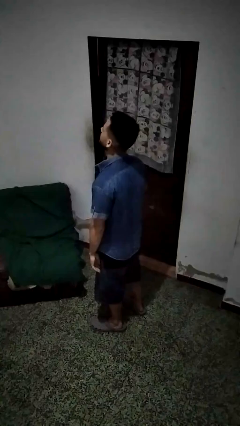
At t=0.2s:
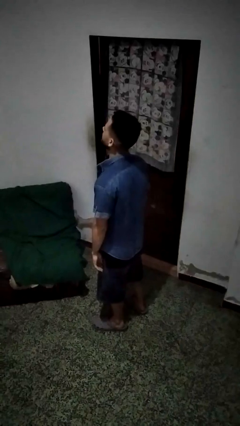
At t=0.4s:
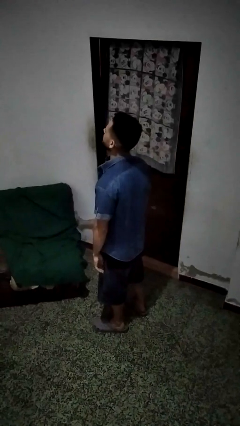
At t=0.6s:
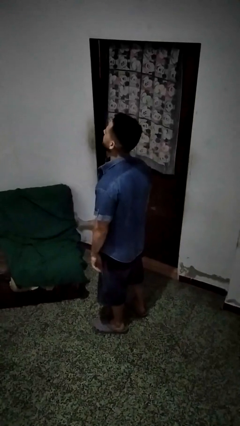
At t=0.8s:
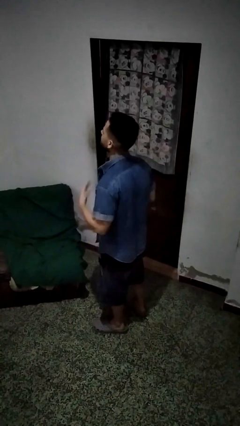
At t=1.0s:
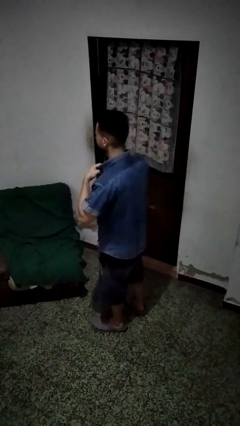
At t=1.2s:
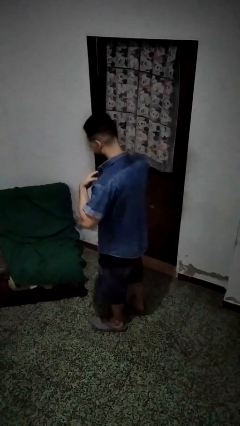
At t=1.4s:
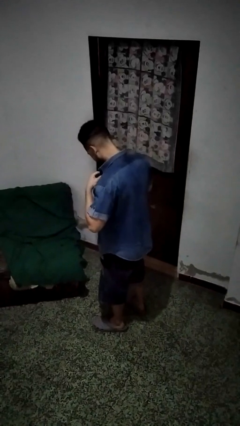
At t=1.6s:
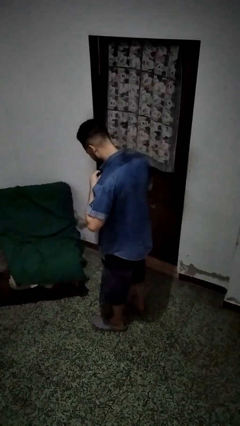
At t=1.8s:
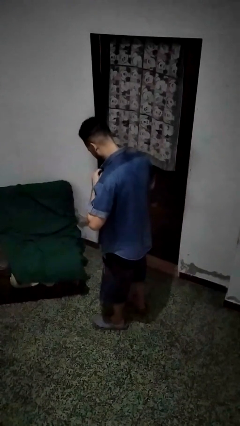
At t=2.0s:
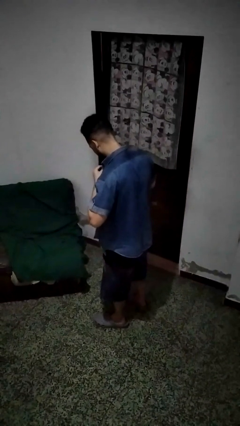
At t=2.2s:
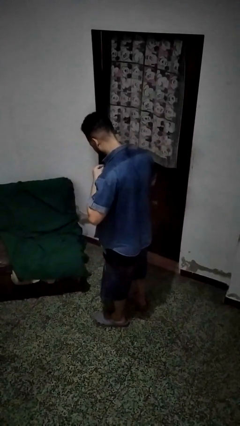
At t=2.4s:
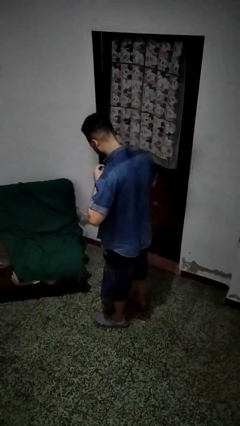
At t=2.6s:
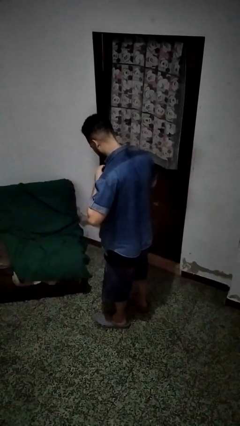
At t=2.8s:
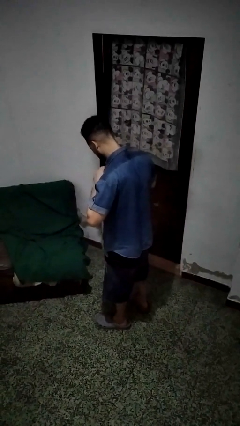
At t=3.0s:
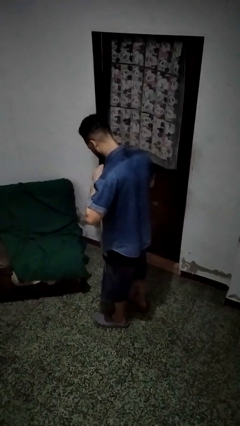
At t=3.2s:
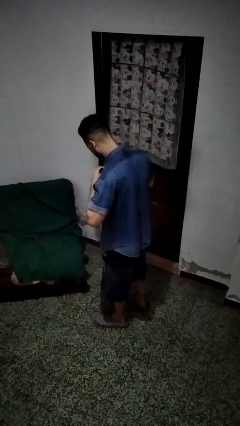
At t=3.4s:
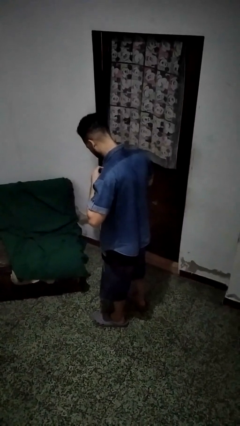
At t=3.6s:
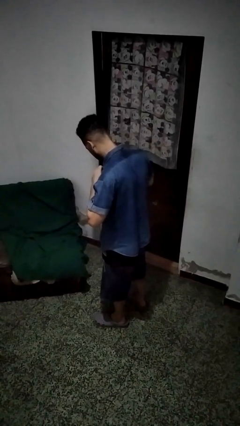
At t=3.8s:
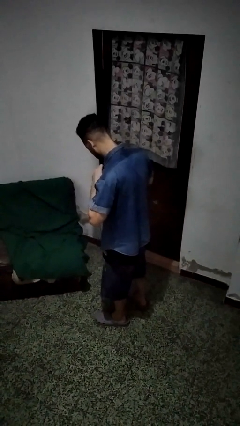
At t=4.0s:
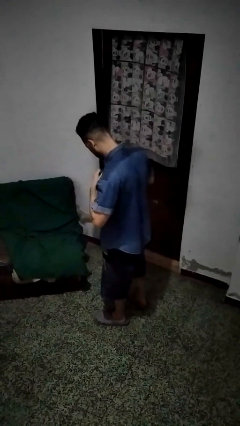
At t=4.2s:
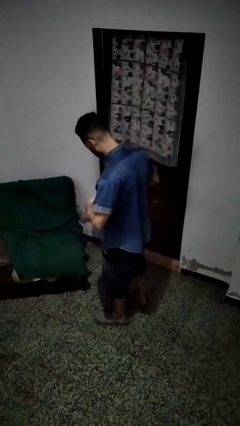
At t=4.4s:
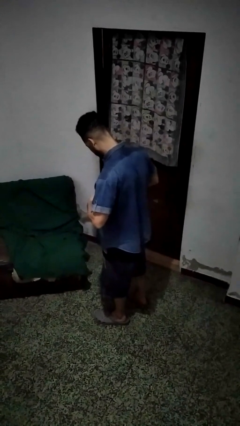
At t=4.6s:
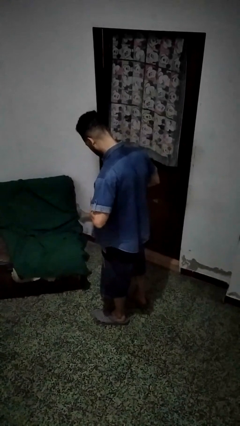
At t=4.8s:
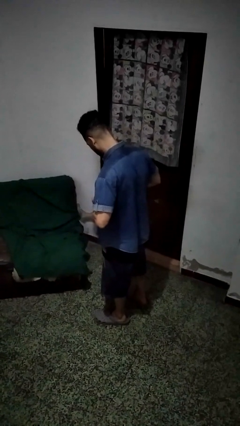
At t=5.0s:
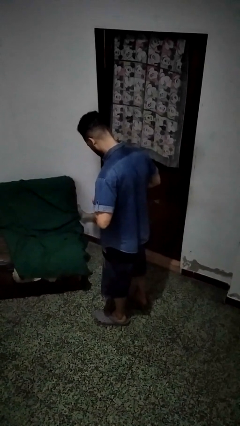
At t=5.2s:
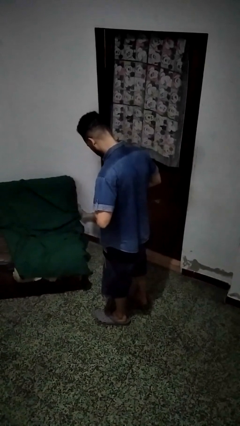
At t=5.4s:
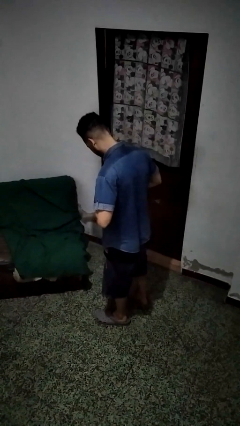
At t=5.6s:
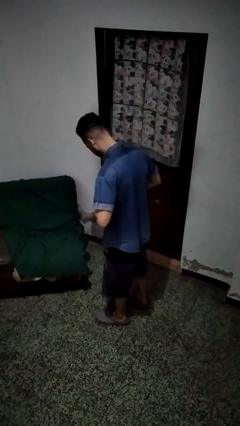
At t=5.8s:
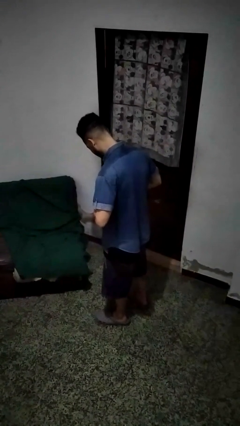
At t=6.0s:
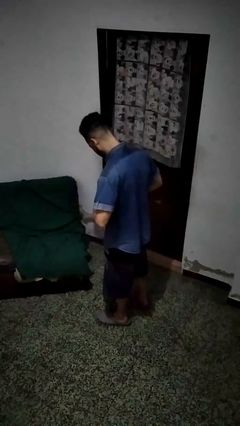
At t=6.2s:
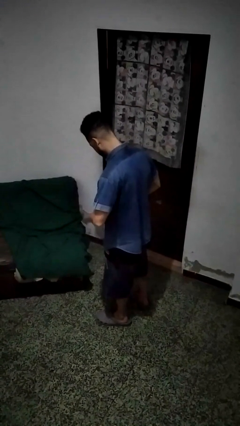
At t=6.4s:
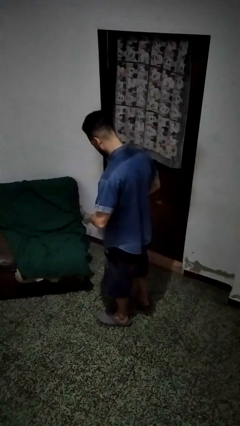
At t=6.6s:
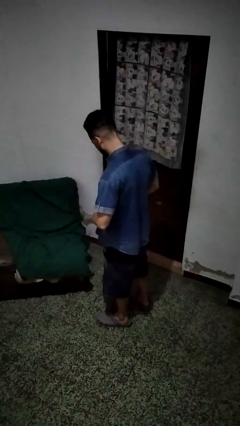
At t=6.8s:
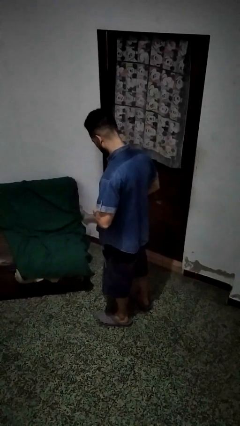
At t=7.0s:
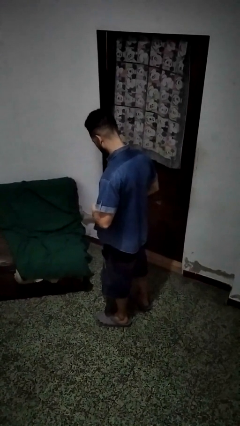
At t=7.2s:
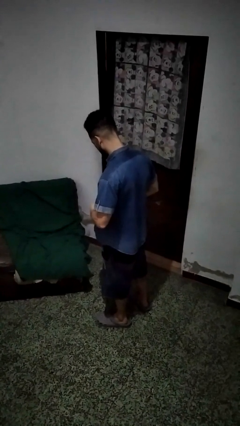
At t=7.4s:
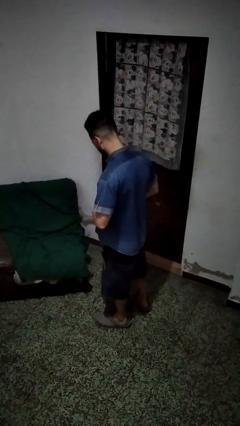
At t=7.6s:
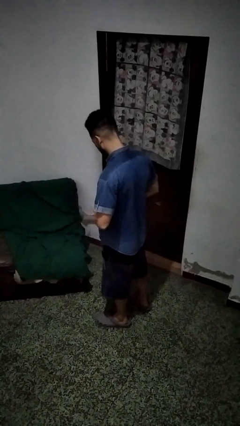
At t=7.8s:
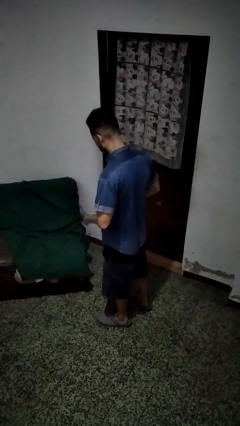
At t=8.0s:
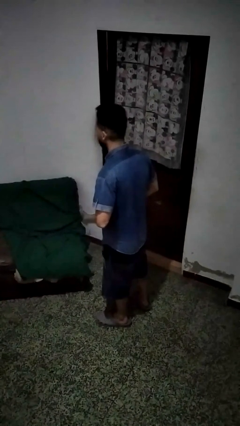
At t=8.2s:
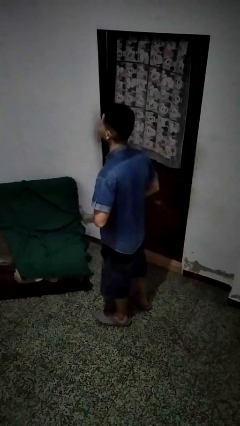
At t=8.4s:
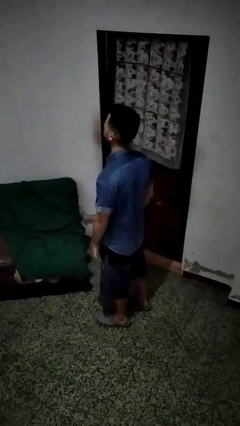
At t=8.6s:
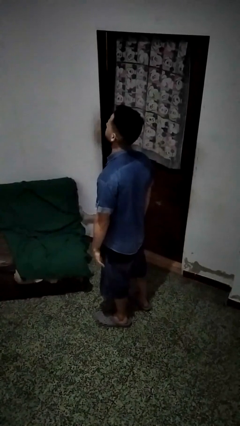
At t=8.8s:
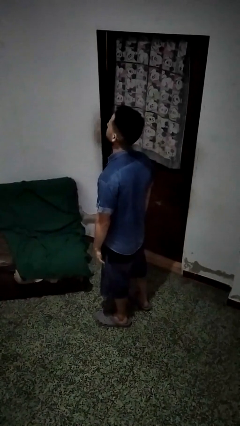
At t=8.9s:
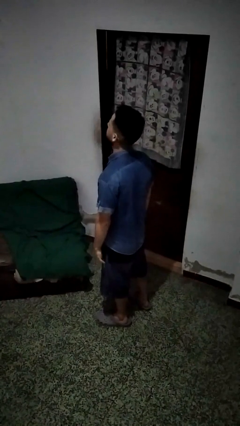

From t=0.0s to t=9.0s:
person buttons shirt

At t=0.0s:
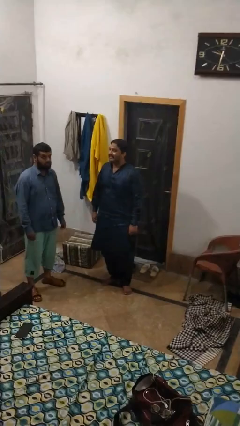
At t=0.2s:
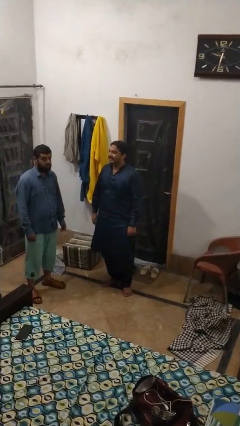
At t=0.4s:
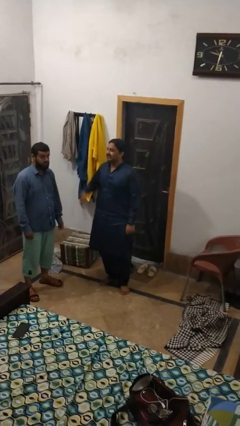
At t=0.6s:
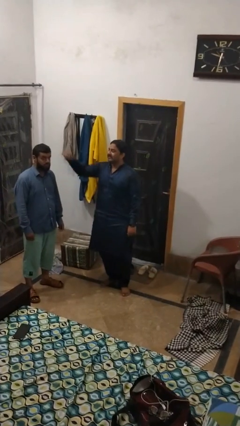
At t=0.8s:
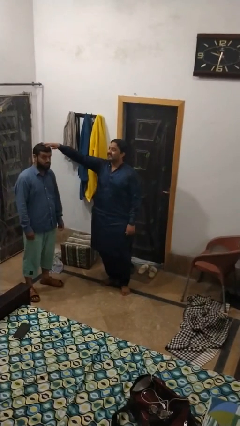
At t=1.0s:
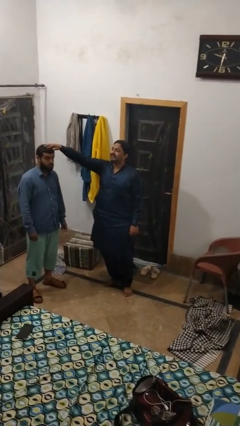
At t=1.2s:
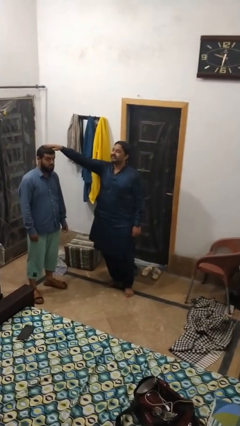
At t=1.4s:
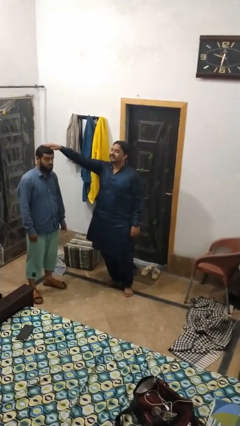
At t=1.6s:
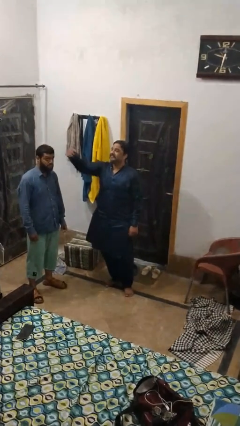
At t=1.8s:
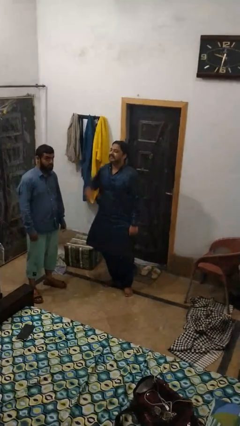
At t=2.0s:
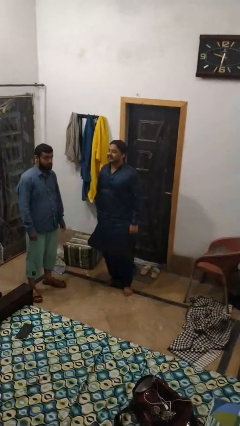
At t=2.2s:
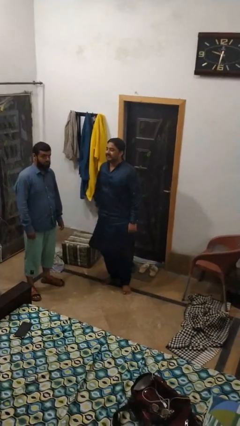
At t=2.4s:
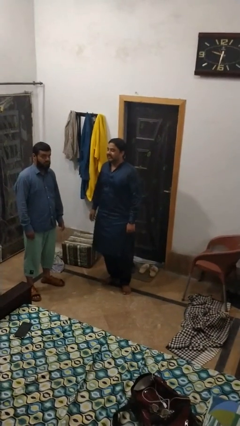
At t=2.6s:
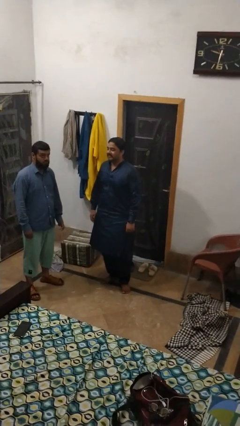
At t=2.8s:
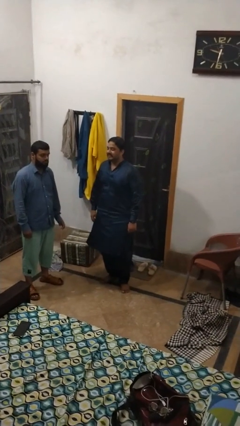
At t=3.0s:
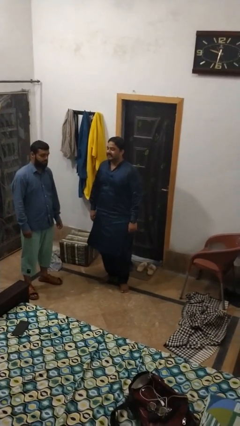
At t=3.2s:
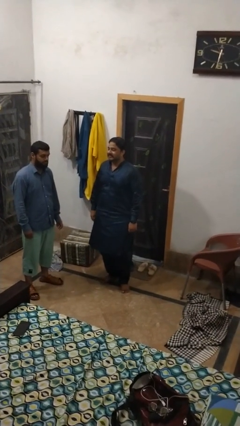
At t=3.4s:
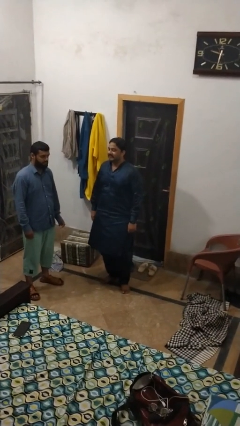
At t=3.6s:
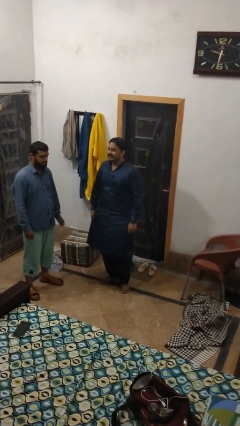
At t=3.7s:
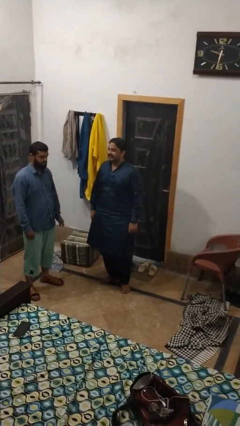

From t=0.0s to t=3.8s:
person grabs person by hair

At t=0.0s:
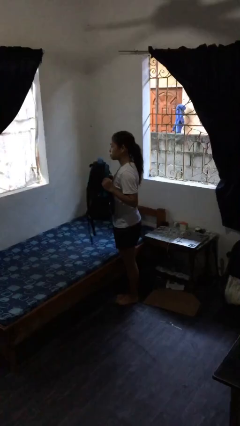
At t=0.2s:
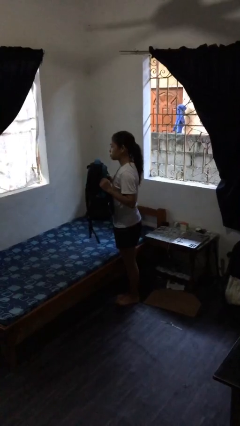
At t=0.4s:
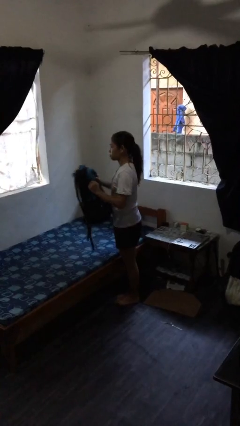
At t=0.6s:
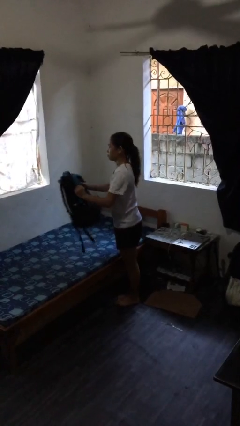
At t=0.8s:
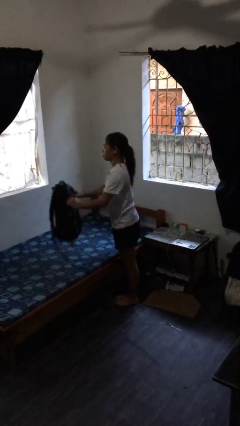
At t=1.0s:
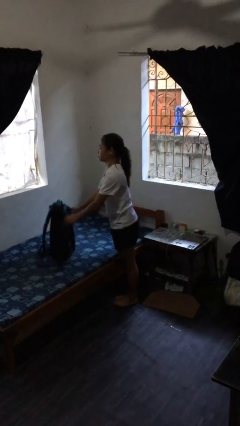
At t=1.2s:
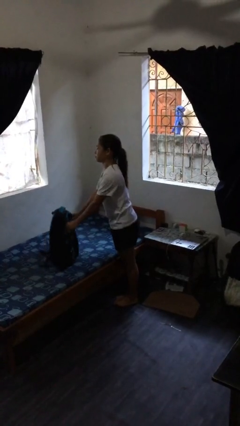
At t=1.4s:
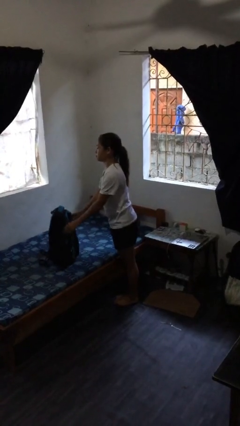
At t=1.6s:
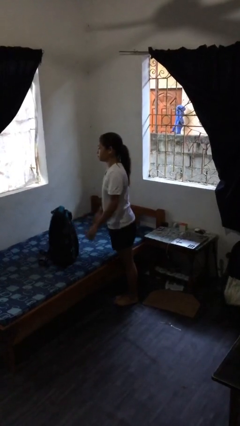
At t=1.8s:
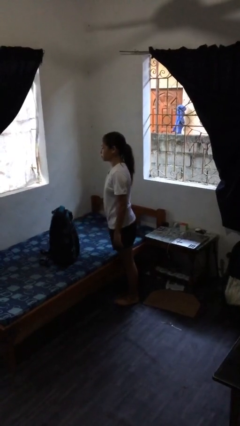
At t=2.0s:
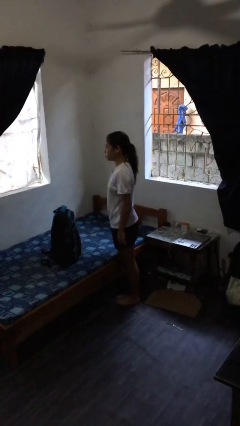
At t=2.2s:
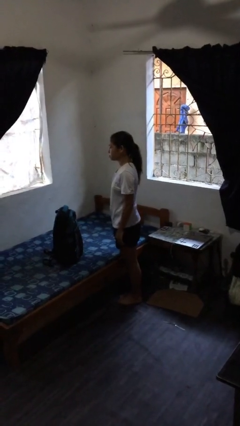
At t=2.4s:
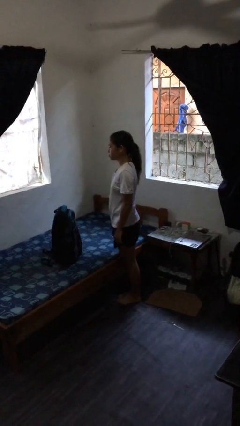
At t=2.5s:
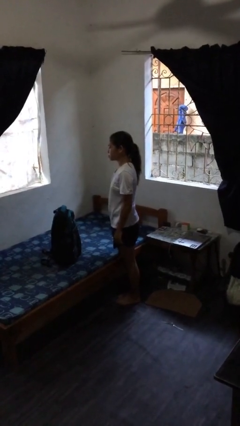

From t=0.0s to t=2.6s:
person puts down object on bed

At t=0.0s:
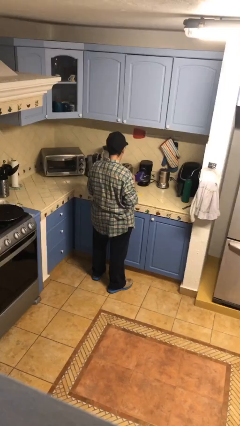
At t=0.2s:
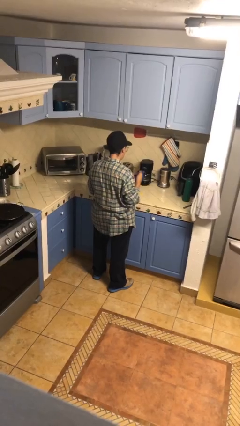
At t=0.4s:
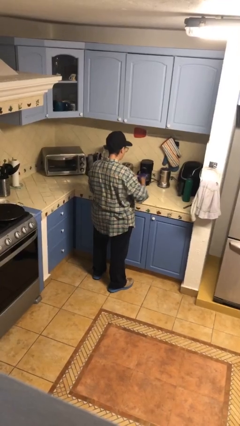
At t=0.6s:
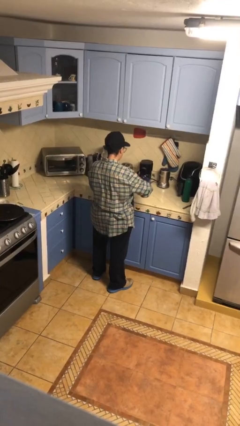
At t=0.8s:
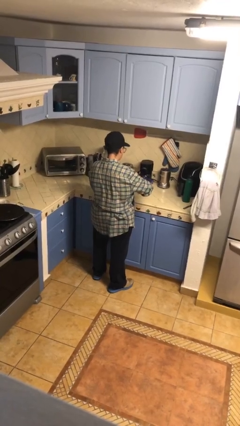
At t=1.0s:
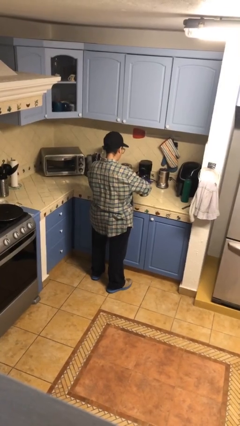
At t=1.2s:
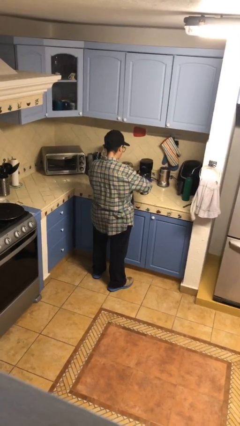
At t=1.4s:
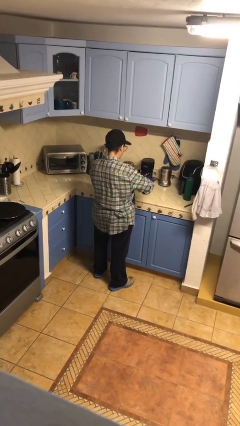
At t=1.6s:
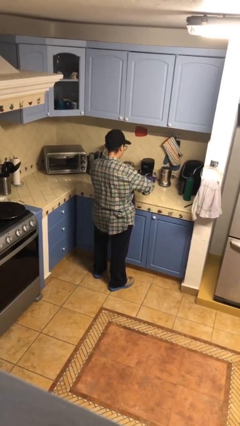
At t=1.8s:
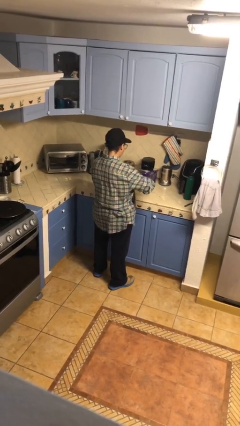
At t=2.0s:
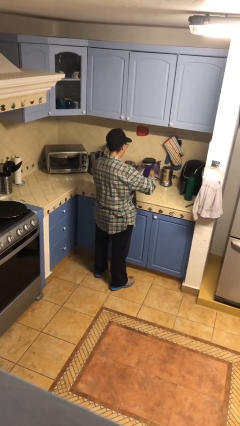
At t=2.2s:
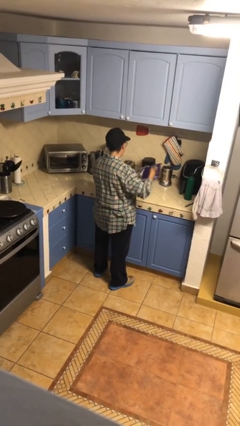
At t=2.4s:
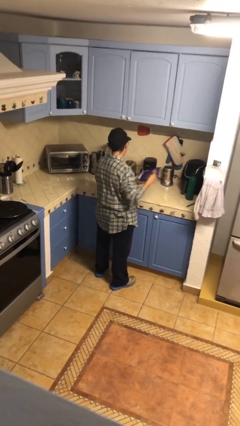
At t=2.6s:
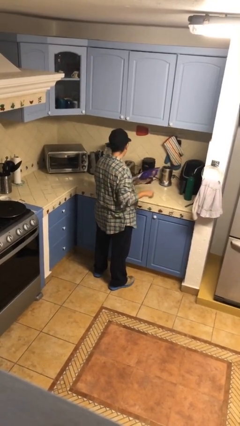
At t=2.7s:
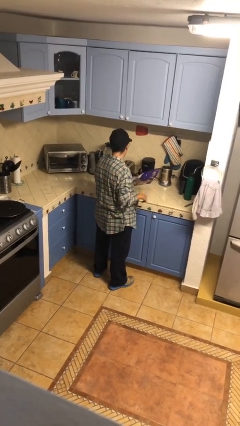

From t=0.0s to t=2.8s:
person eats snack from bag
